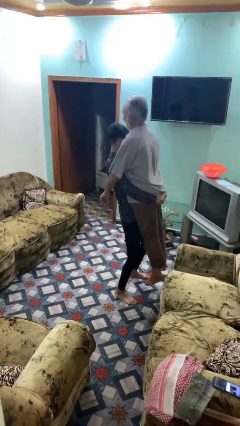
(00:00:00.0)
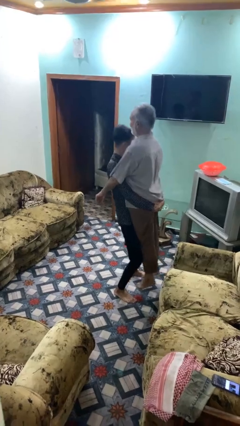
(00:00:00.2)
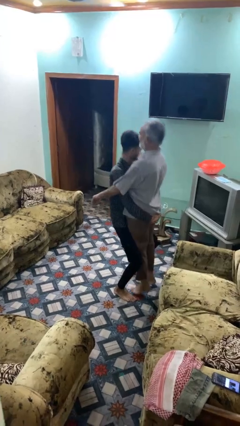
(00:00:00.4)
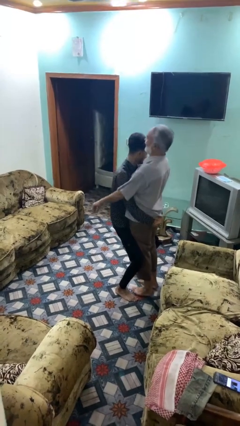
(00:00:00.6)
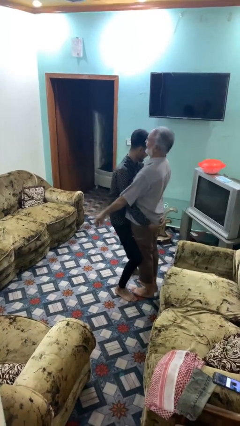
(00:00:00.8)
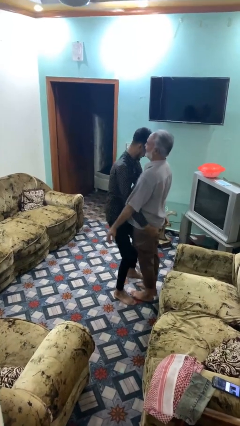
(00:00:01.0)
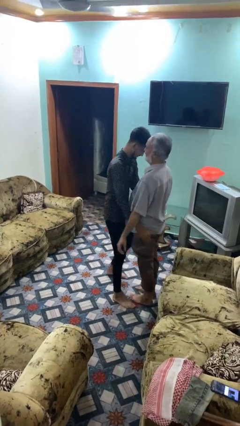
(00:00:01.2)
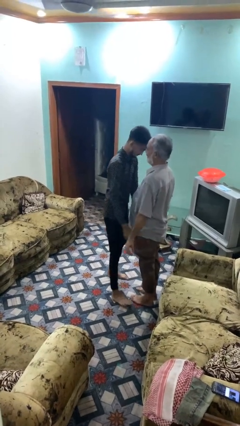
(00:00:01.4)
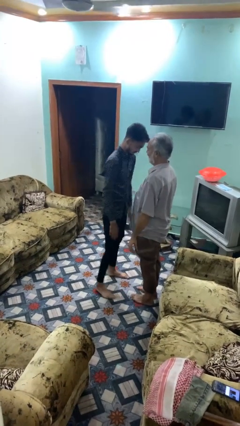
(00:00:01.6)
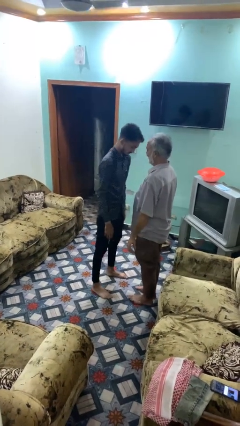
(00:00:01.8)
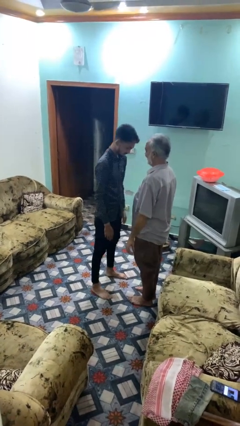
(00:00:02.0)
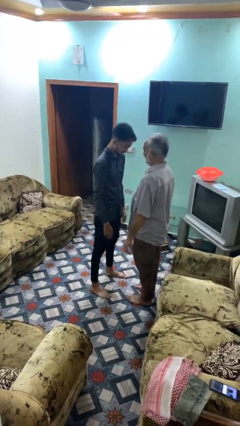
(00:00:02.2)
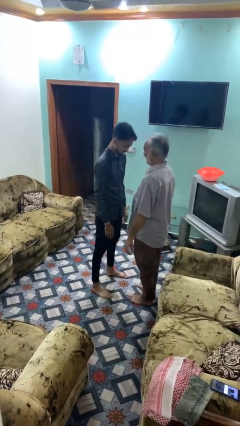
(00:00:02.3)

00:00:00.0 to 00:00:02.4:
person puts down person

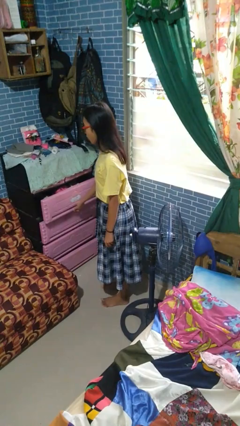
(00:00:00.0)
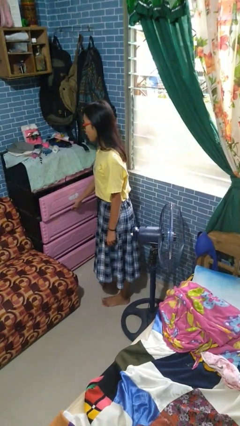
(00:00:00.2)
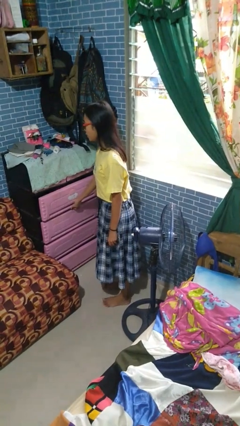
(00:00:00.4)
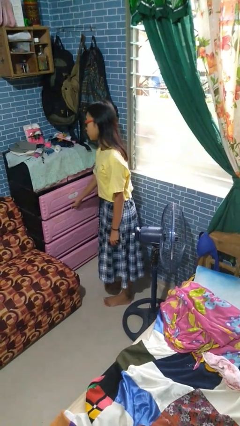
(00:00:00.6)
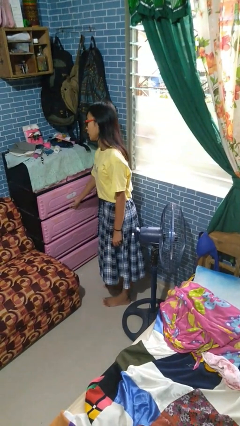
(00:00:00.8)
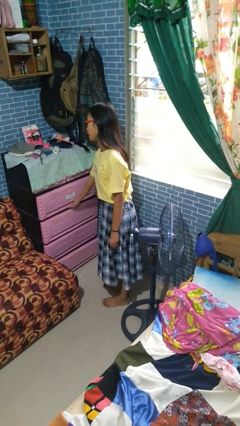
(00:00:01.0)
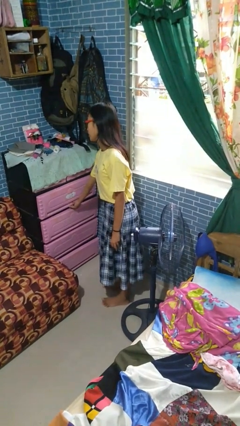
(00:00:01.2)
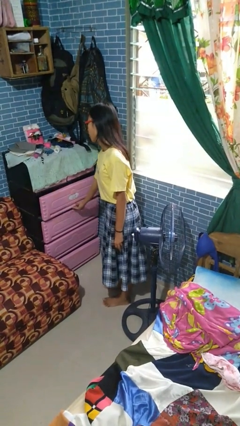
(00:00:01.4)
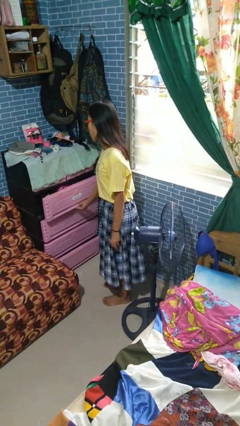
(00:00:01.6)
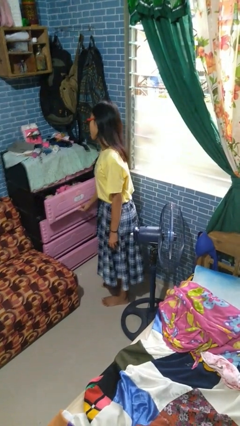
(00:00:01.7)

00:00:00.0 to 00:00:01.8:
person closes dresser drawer

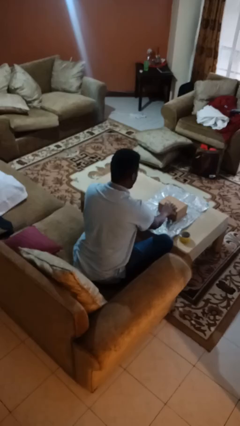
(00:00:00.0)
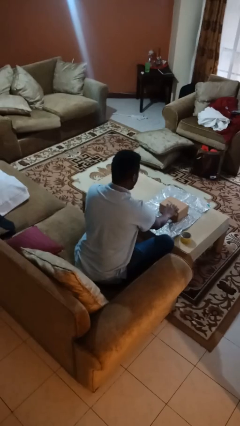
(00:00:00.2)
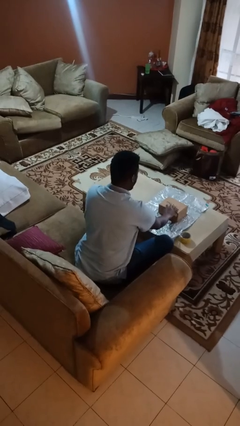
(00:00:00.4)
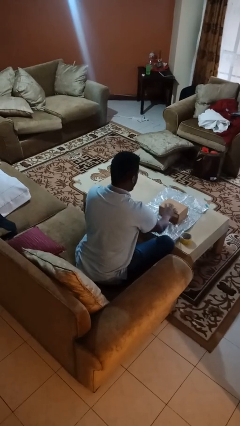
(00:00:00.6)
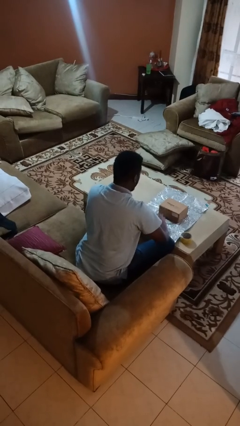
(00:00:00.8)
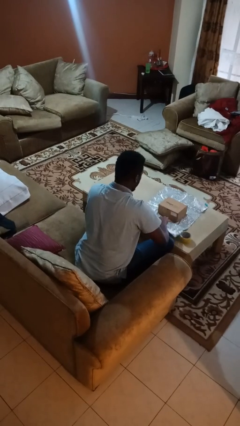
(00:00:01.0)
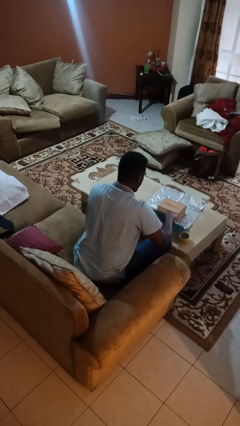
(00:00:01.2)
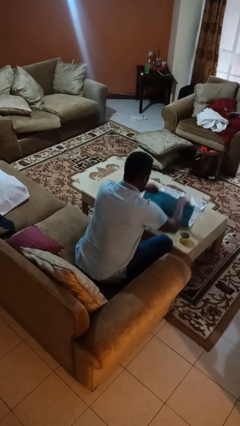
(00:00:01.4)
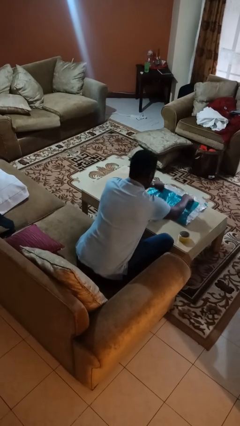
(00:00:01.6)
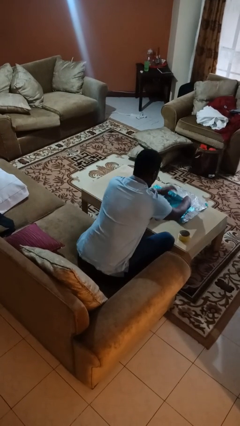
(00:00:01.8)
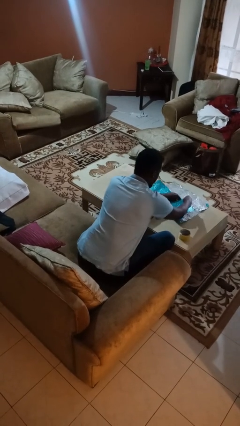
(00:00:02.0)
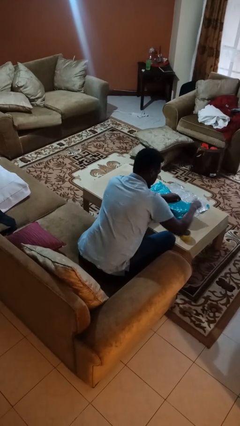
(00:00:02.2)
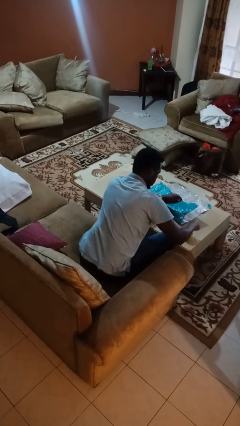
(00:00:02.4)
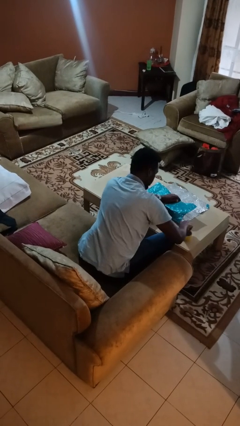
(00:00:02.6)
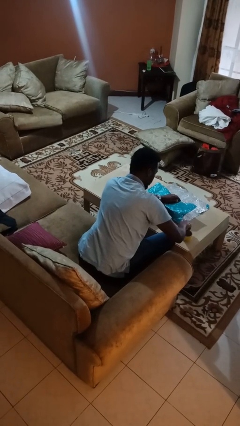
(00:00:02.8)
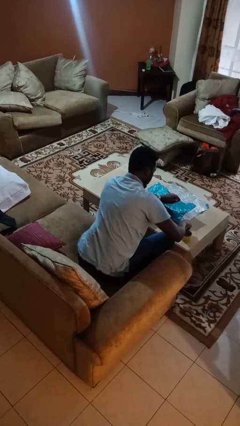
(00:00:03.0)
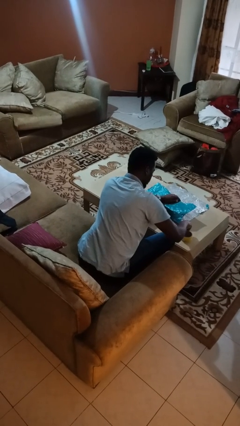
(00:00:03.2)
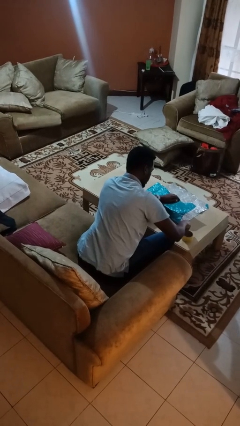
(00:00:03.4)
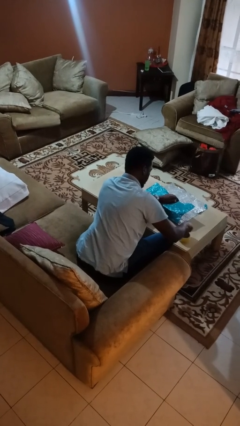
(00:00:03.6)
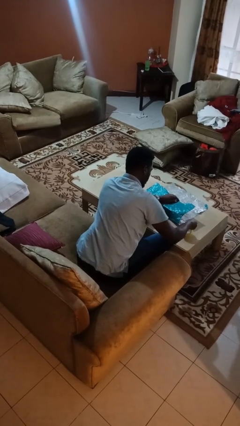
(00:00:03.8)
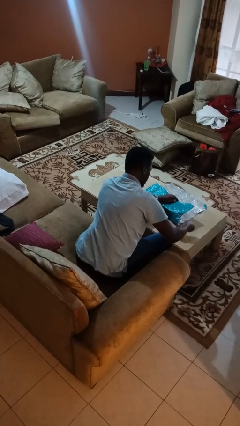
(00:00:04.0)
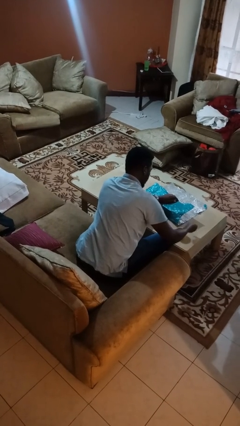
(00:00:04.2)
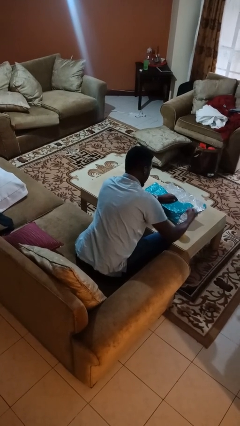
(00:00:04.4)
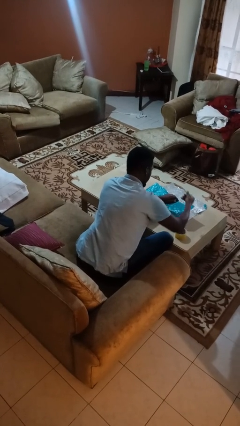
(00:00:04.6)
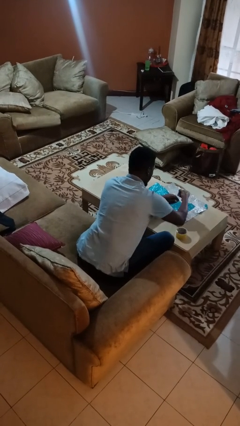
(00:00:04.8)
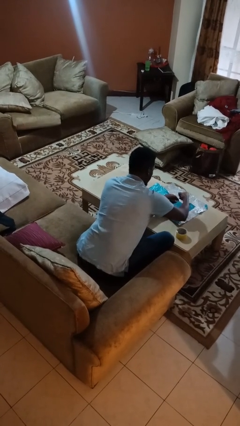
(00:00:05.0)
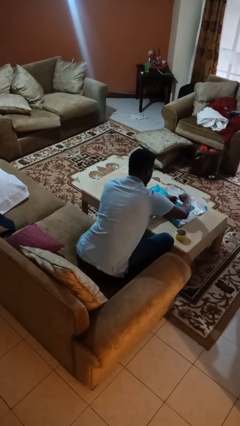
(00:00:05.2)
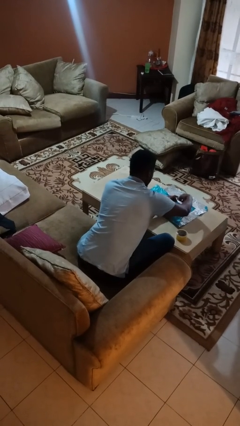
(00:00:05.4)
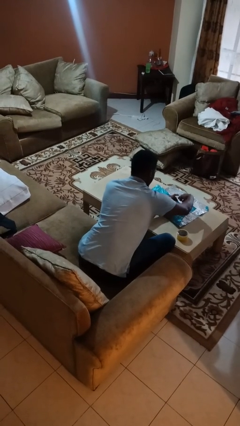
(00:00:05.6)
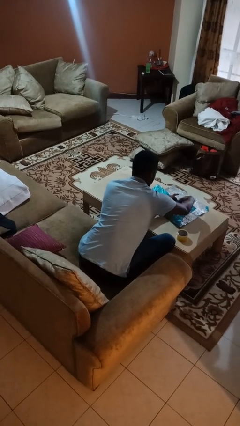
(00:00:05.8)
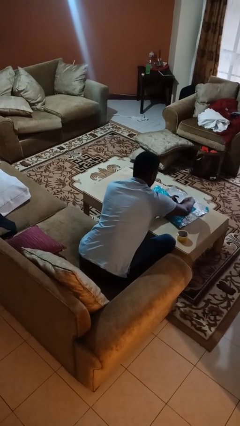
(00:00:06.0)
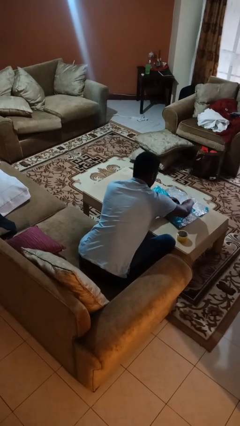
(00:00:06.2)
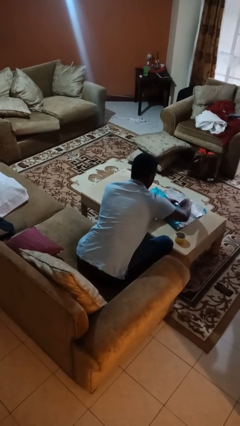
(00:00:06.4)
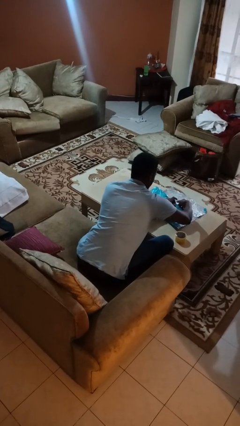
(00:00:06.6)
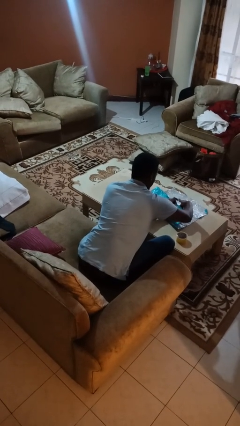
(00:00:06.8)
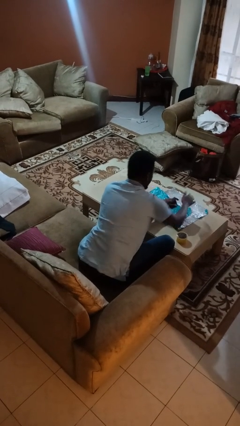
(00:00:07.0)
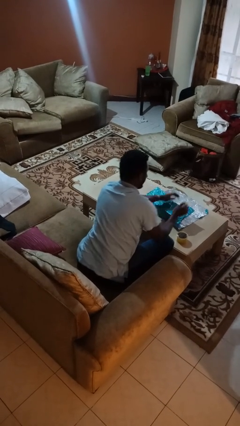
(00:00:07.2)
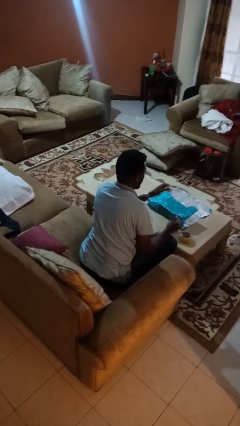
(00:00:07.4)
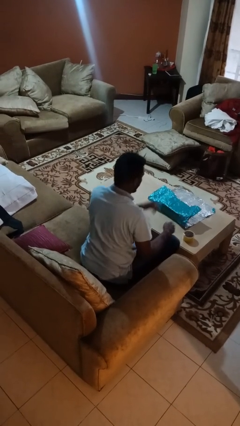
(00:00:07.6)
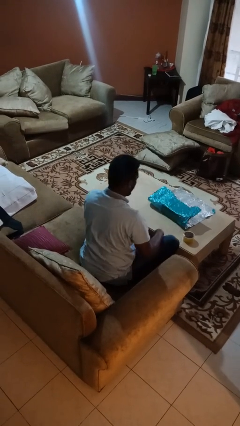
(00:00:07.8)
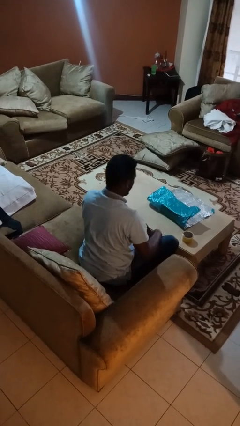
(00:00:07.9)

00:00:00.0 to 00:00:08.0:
person wraps box

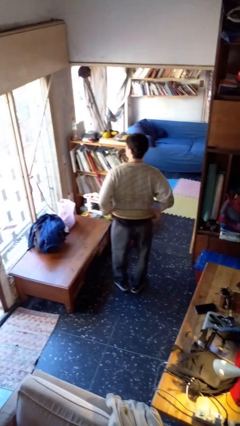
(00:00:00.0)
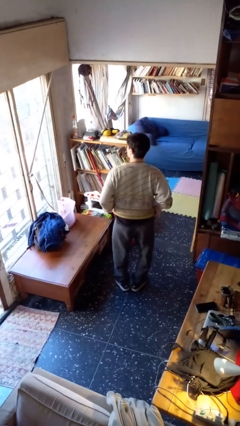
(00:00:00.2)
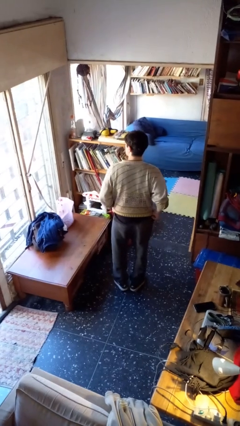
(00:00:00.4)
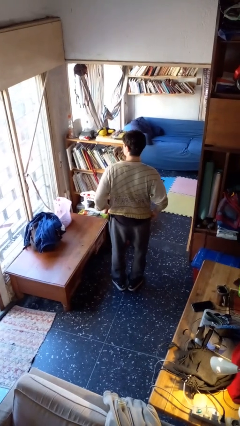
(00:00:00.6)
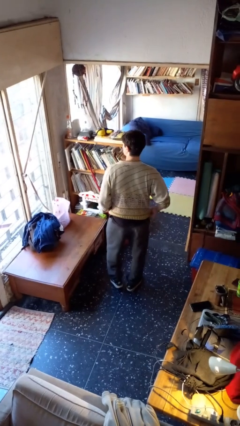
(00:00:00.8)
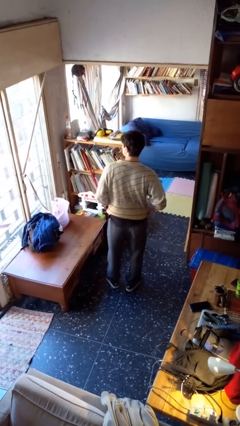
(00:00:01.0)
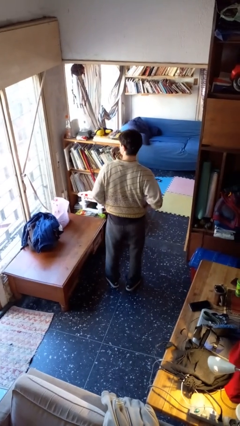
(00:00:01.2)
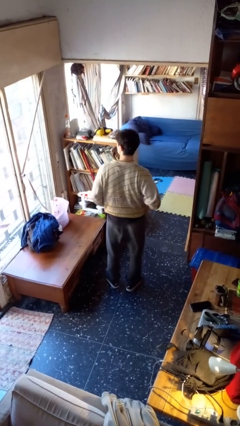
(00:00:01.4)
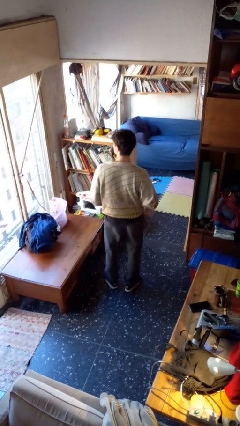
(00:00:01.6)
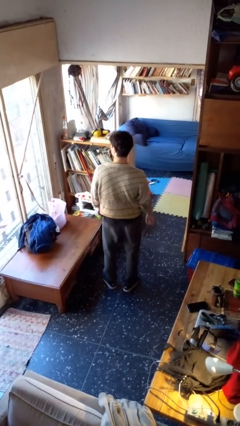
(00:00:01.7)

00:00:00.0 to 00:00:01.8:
person hikes up pants

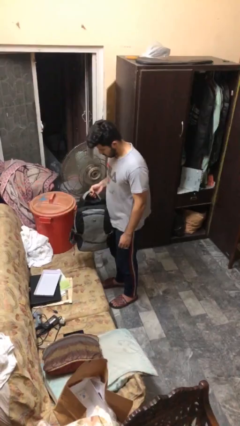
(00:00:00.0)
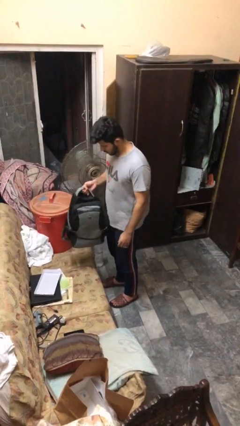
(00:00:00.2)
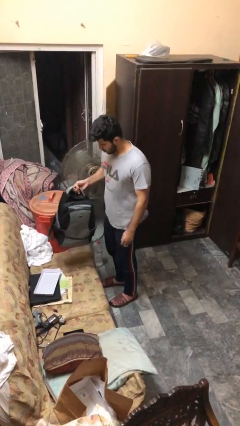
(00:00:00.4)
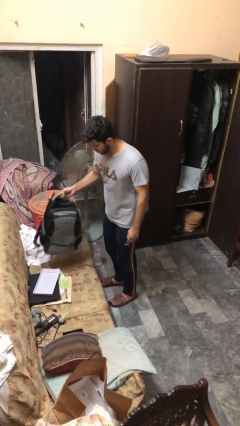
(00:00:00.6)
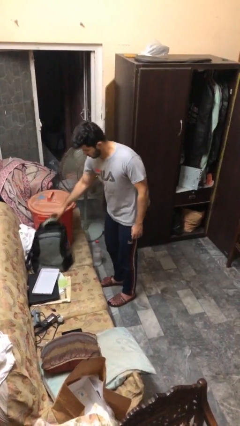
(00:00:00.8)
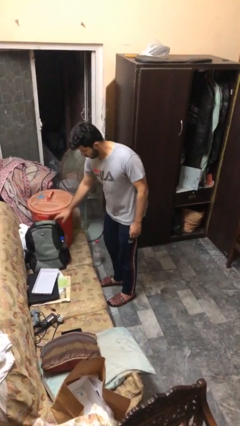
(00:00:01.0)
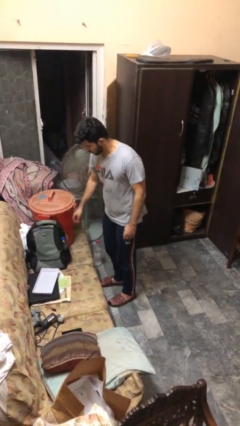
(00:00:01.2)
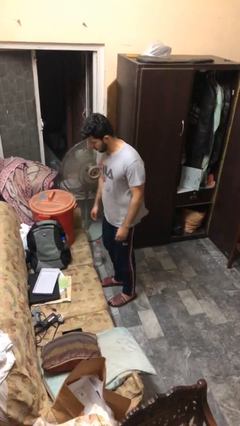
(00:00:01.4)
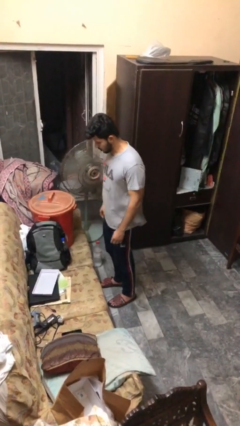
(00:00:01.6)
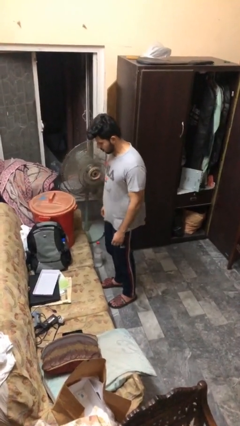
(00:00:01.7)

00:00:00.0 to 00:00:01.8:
person puts down object on couch

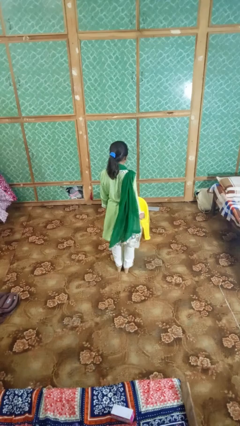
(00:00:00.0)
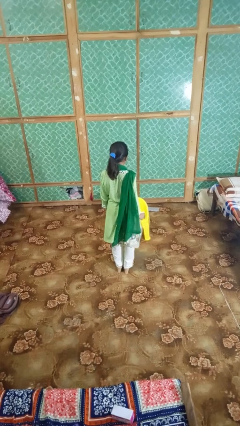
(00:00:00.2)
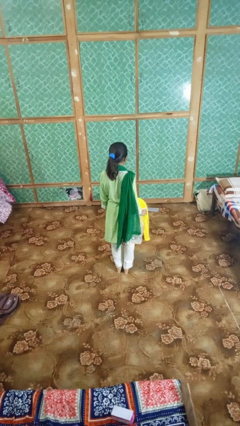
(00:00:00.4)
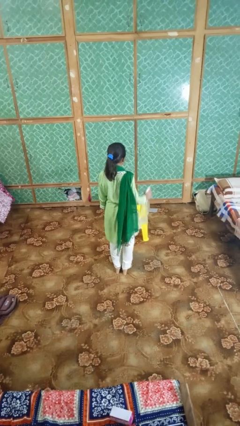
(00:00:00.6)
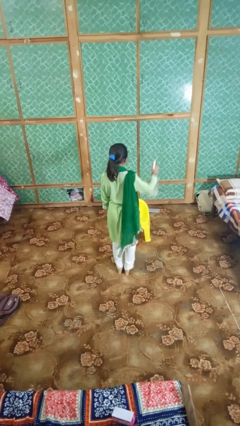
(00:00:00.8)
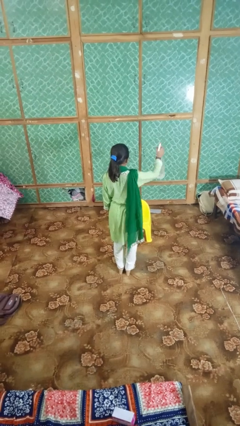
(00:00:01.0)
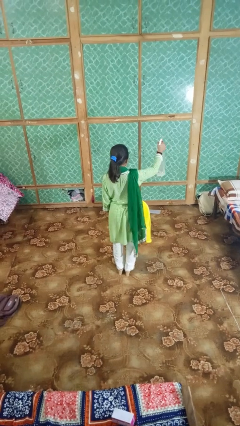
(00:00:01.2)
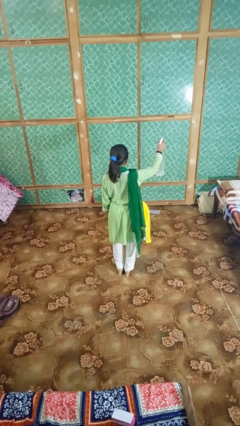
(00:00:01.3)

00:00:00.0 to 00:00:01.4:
person sprays from bottle
